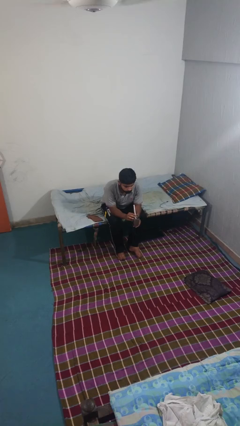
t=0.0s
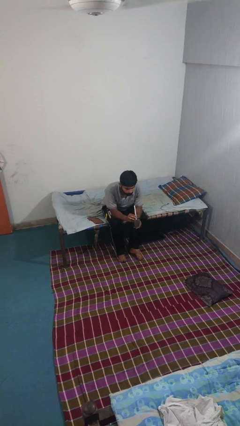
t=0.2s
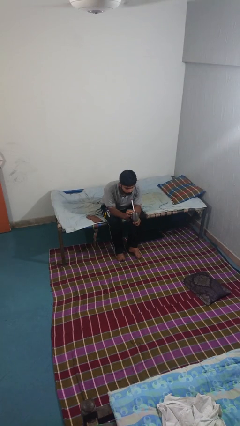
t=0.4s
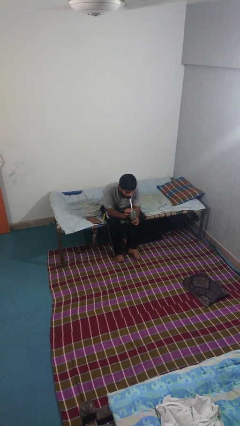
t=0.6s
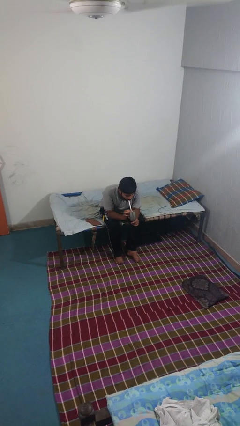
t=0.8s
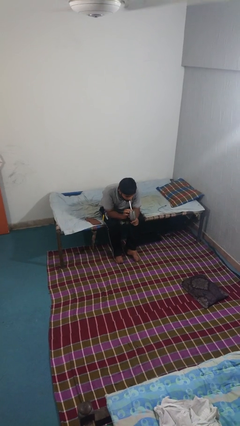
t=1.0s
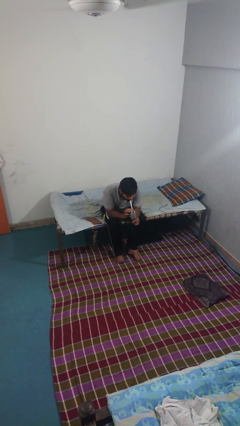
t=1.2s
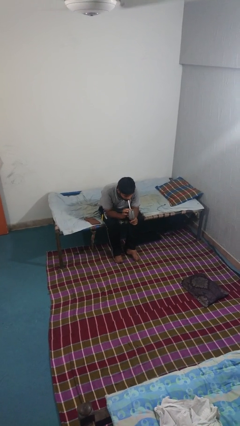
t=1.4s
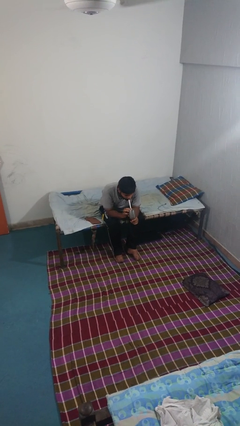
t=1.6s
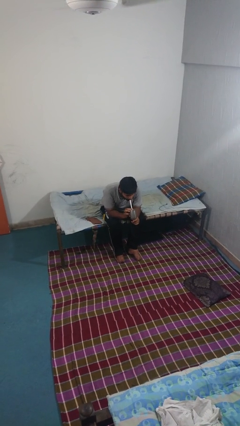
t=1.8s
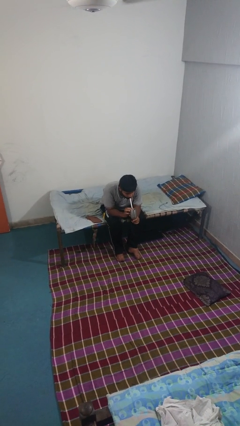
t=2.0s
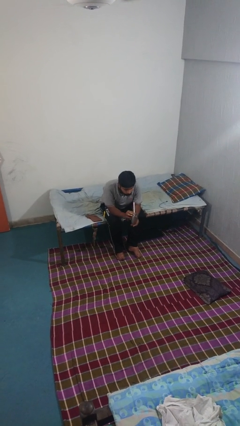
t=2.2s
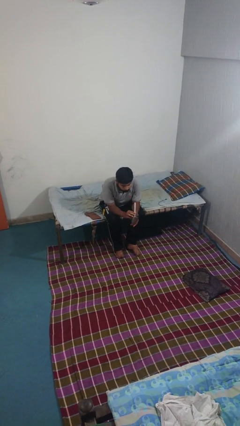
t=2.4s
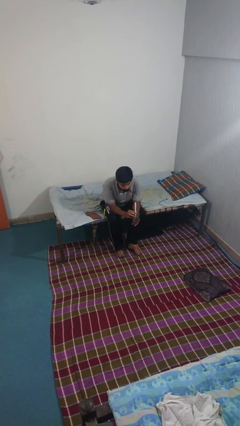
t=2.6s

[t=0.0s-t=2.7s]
person drinks from straw

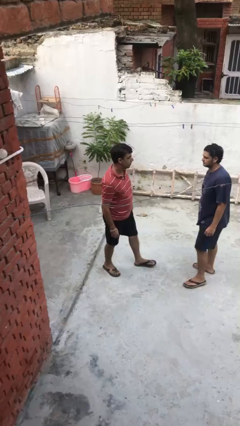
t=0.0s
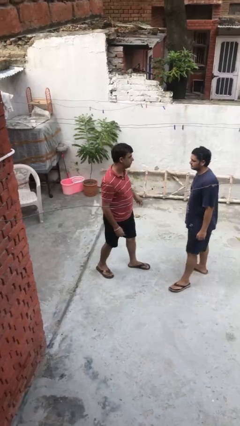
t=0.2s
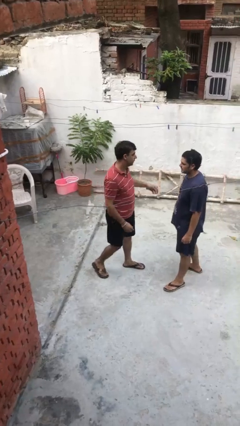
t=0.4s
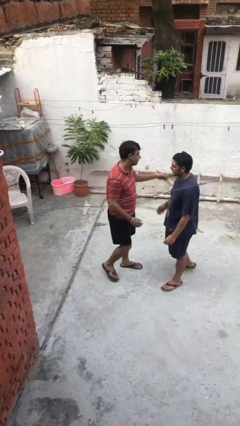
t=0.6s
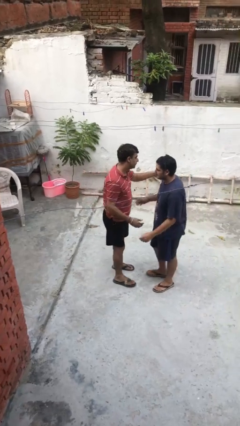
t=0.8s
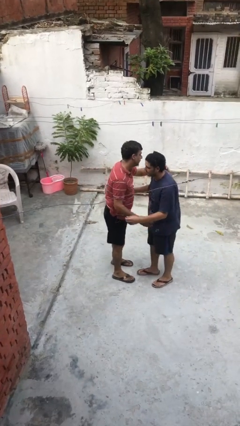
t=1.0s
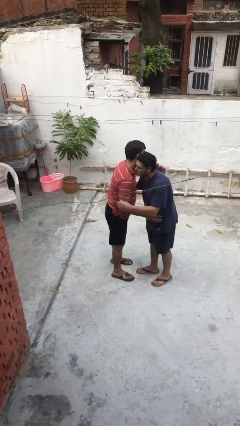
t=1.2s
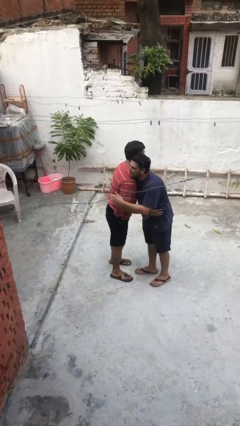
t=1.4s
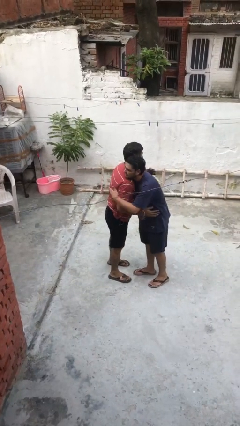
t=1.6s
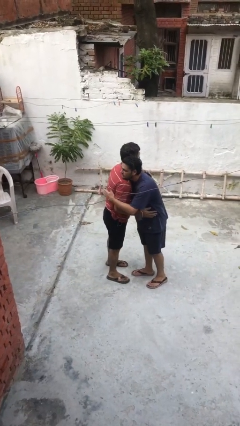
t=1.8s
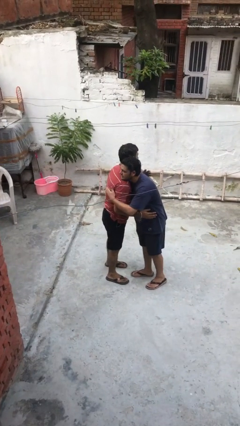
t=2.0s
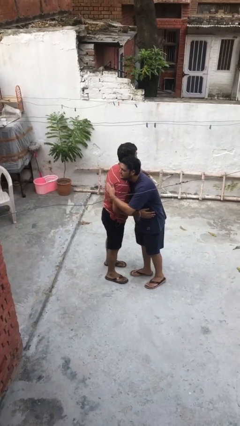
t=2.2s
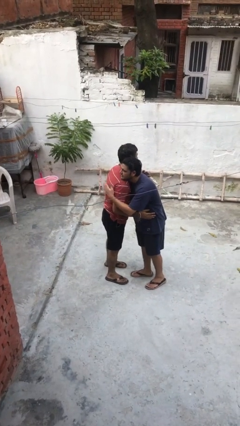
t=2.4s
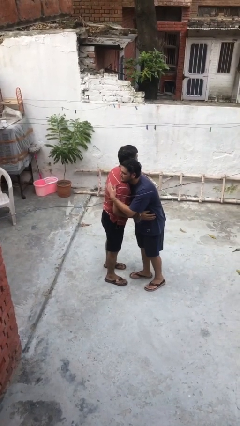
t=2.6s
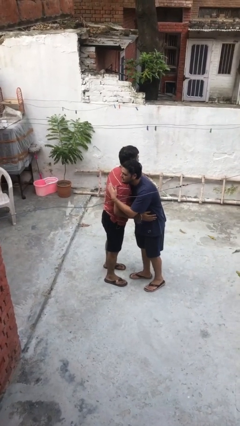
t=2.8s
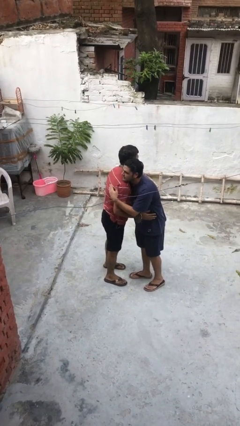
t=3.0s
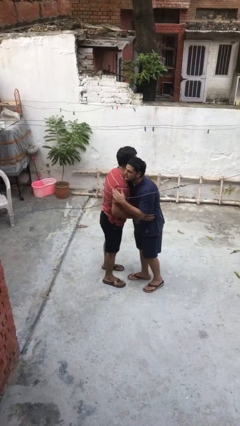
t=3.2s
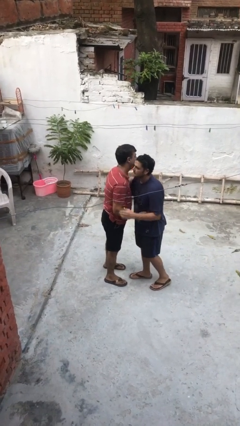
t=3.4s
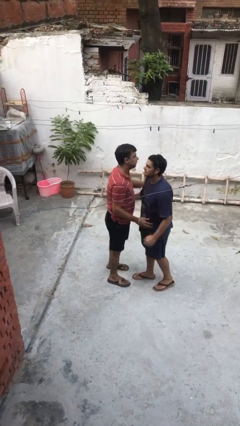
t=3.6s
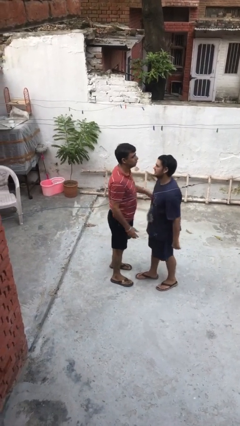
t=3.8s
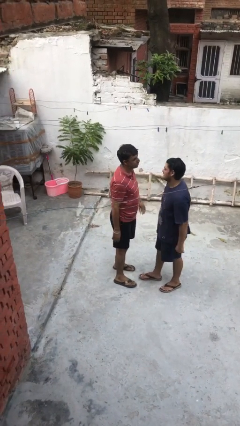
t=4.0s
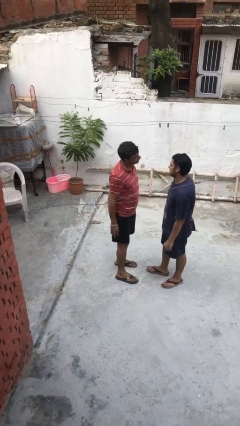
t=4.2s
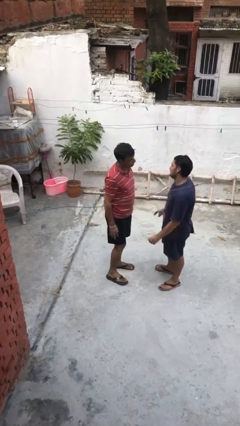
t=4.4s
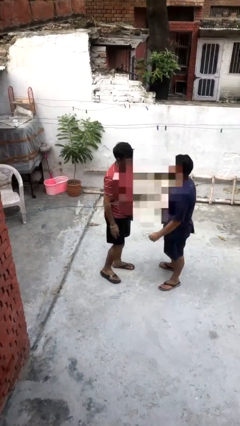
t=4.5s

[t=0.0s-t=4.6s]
person embraces person

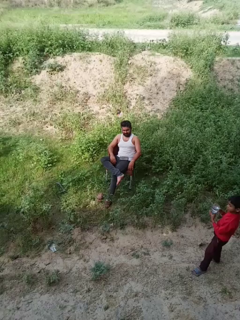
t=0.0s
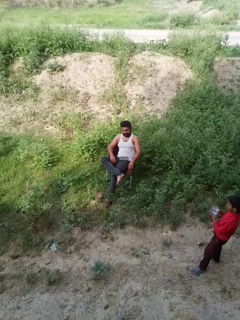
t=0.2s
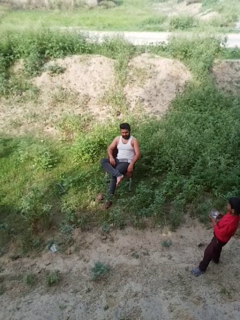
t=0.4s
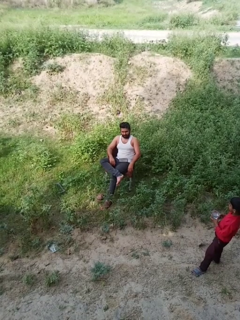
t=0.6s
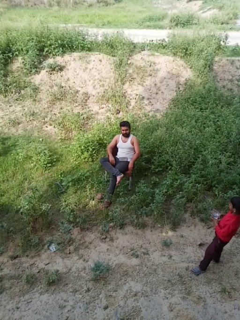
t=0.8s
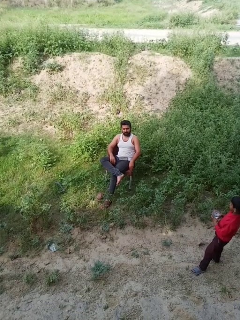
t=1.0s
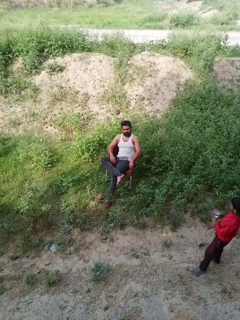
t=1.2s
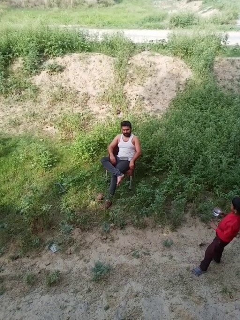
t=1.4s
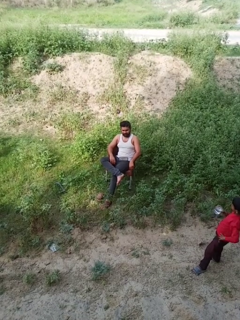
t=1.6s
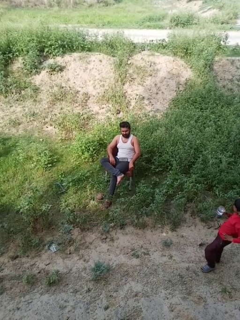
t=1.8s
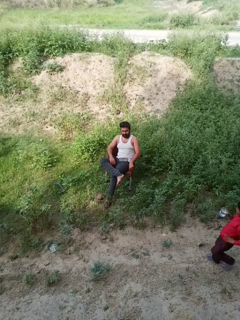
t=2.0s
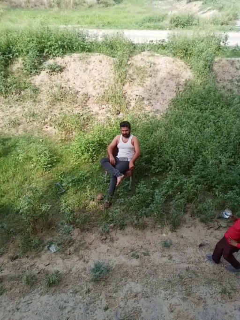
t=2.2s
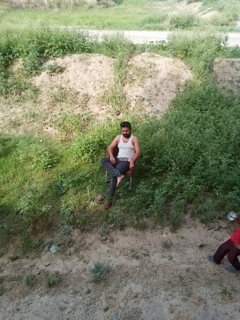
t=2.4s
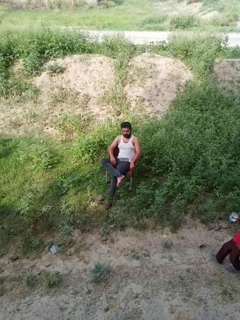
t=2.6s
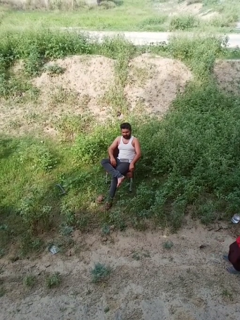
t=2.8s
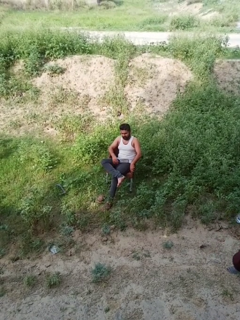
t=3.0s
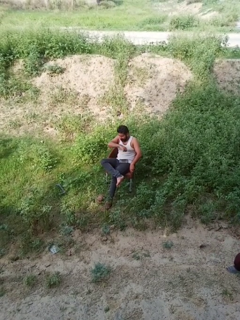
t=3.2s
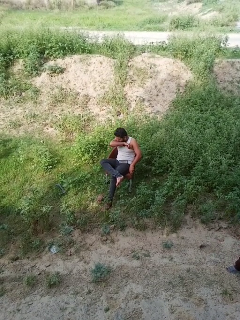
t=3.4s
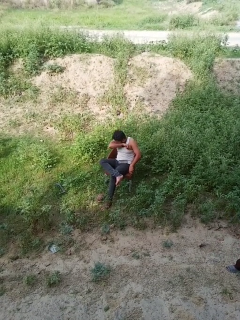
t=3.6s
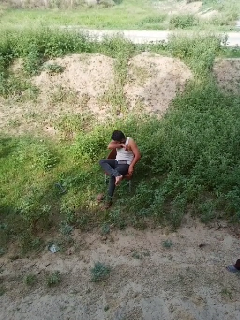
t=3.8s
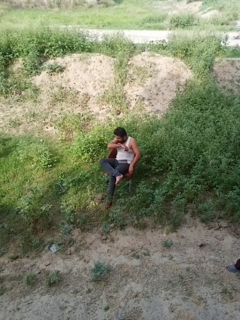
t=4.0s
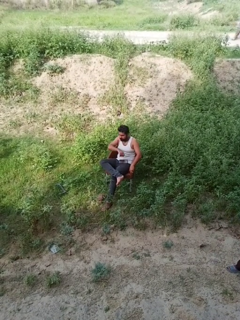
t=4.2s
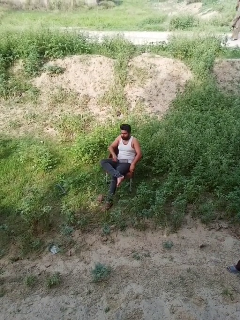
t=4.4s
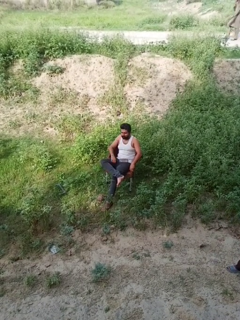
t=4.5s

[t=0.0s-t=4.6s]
person sneezes into arm

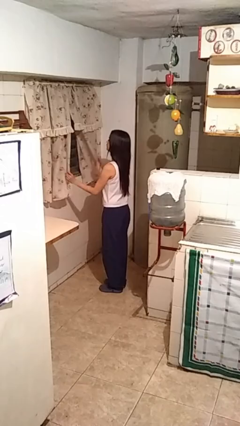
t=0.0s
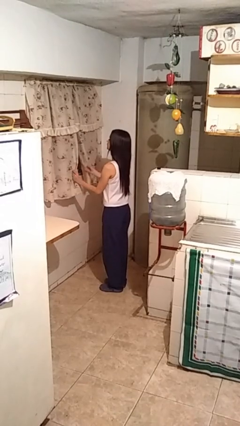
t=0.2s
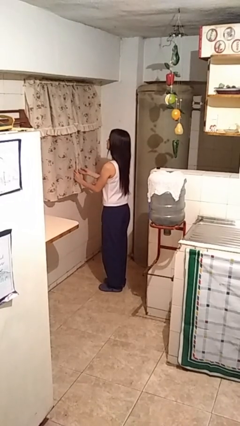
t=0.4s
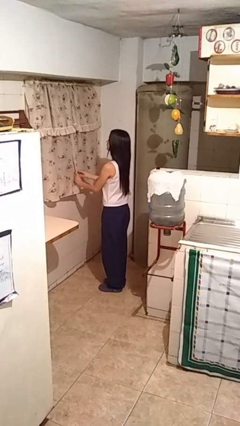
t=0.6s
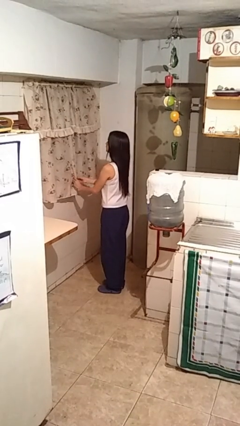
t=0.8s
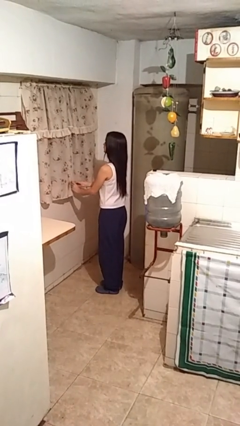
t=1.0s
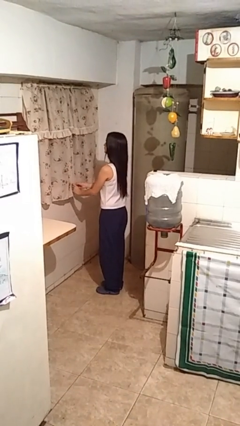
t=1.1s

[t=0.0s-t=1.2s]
person closes curtains

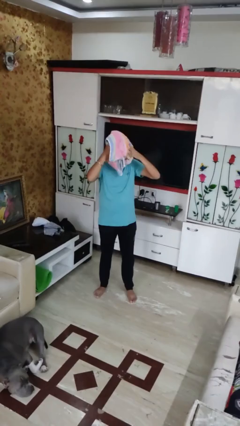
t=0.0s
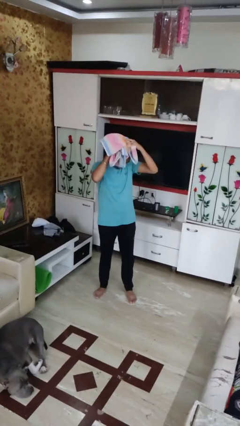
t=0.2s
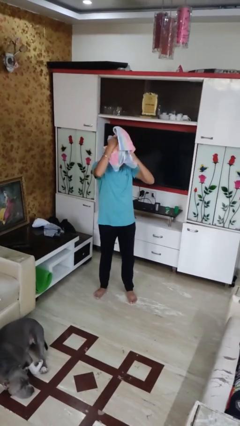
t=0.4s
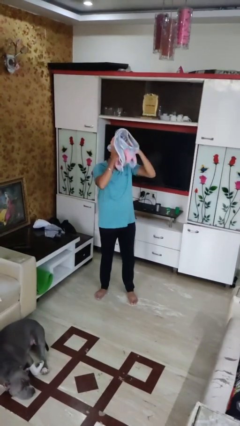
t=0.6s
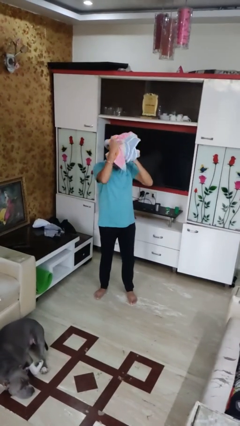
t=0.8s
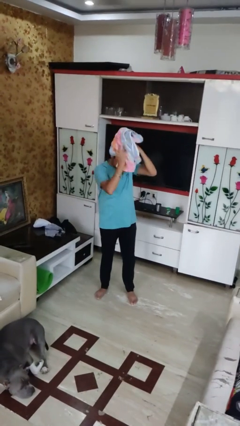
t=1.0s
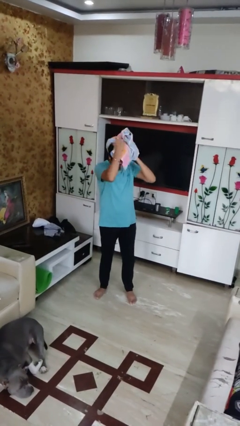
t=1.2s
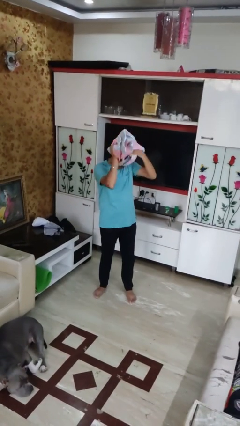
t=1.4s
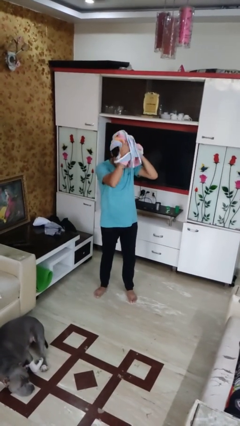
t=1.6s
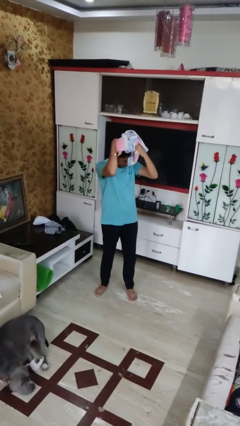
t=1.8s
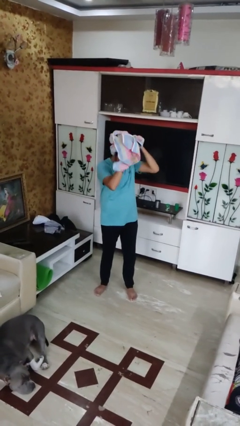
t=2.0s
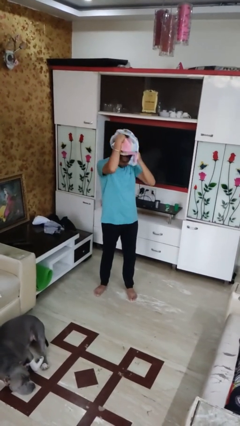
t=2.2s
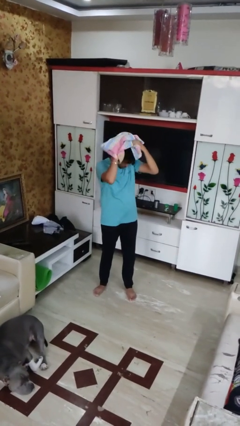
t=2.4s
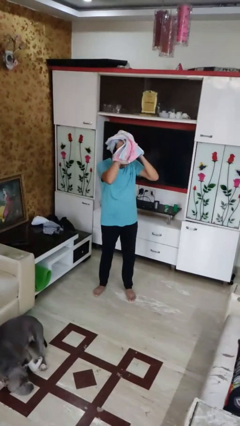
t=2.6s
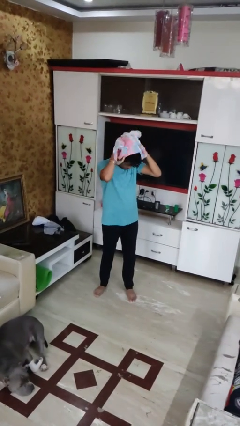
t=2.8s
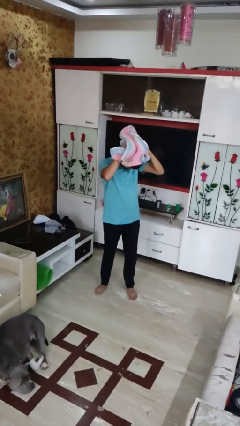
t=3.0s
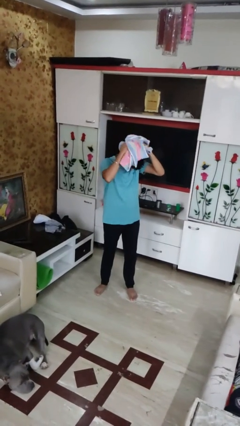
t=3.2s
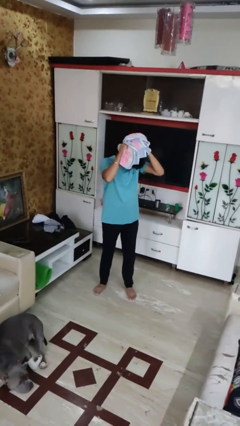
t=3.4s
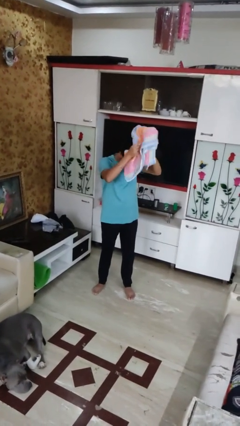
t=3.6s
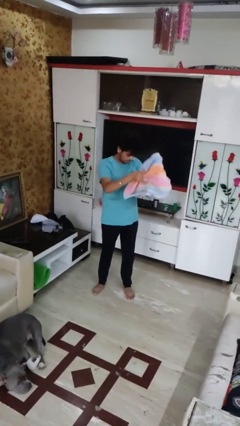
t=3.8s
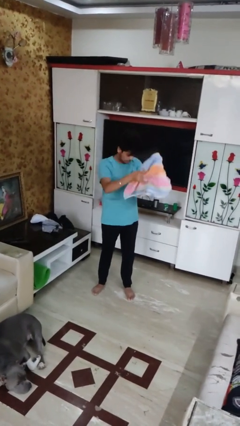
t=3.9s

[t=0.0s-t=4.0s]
person dries hair with towel

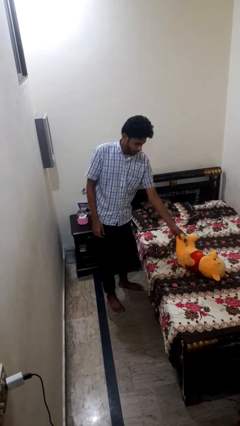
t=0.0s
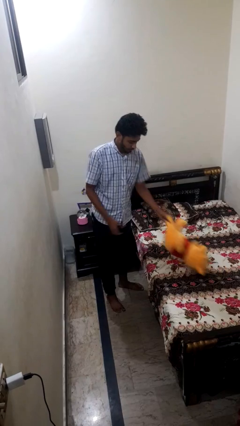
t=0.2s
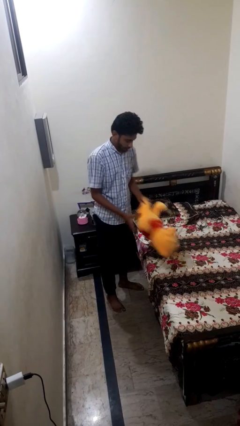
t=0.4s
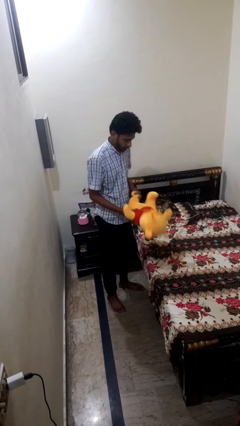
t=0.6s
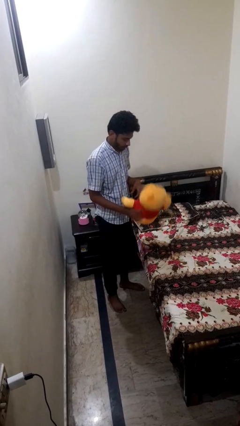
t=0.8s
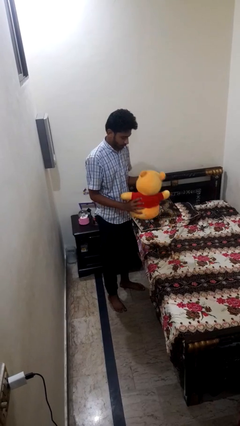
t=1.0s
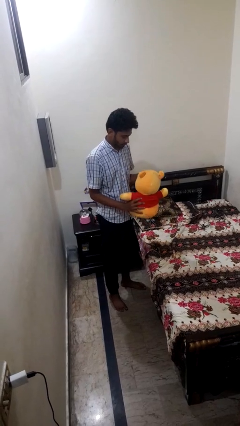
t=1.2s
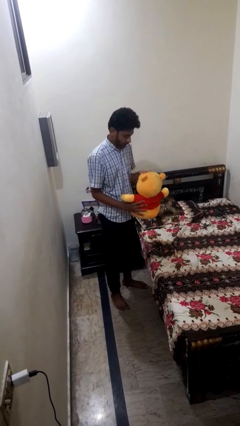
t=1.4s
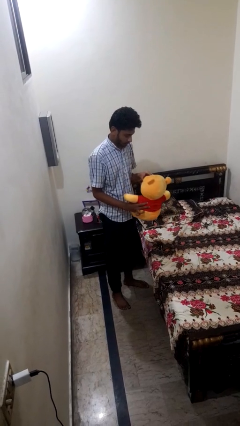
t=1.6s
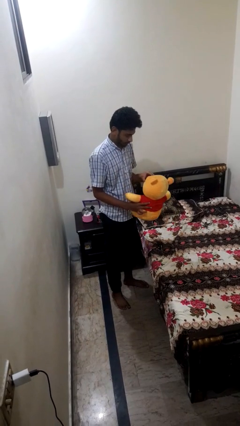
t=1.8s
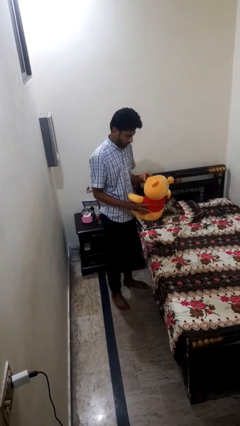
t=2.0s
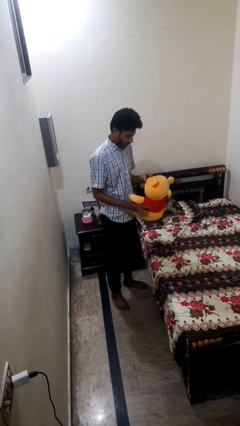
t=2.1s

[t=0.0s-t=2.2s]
person picks up object from bed
